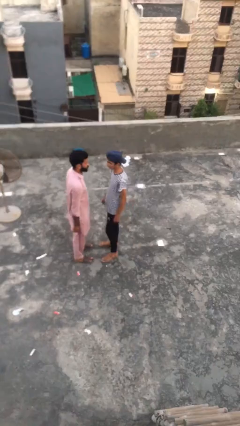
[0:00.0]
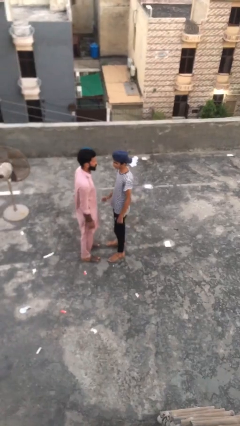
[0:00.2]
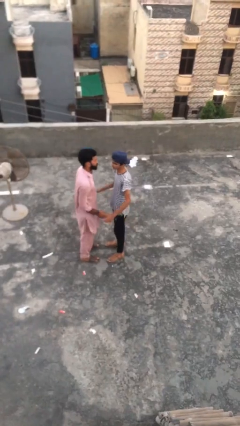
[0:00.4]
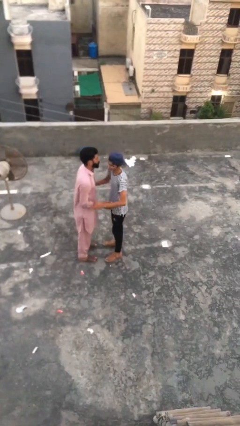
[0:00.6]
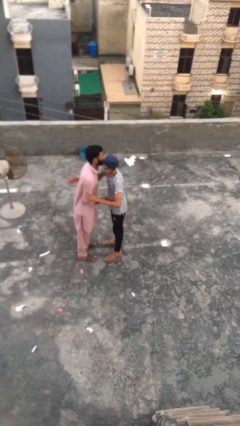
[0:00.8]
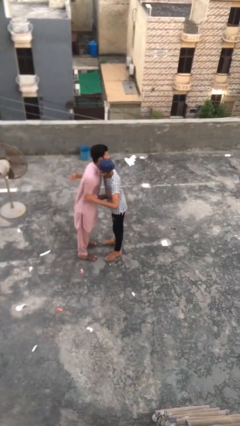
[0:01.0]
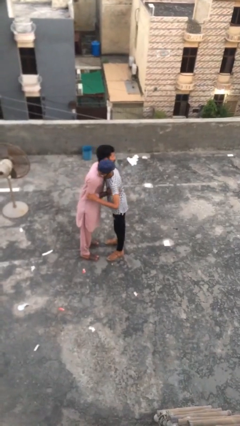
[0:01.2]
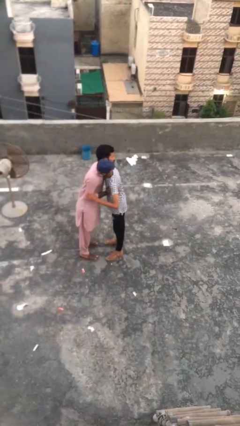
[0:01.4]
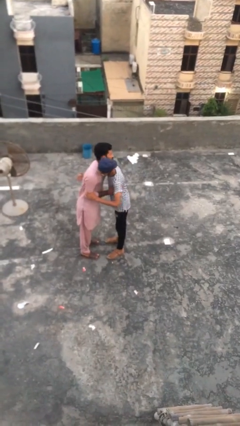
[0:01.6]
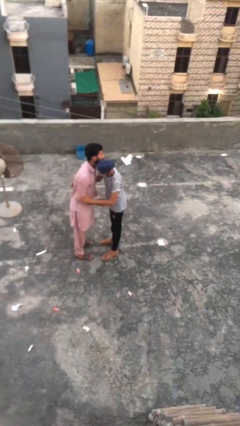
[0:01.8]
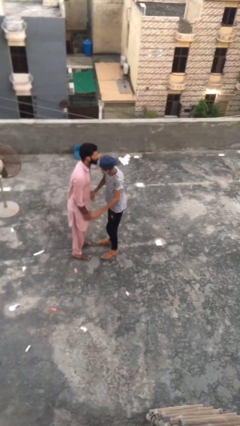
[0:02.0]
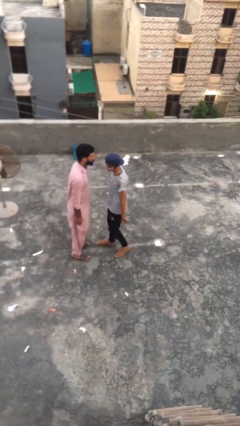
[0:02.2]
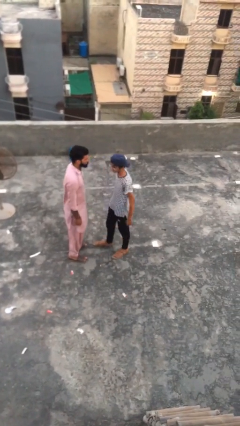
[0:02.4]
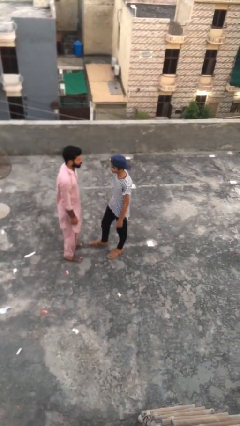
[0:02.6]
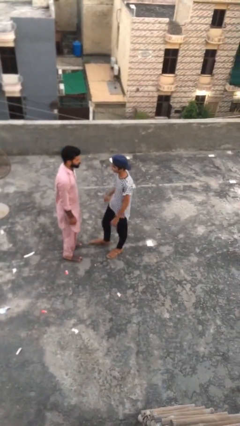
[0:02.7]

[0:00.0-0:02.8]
person embraces person

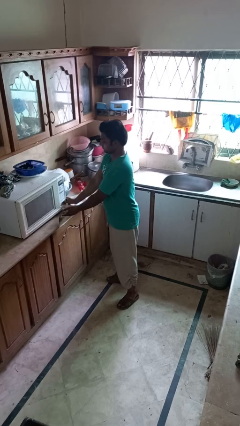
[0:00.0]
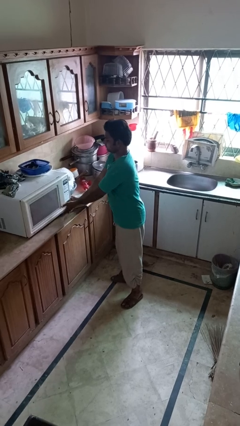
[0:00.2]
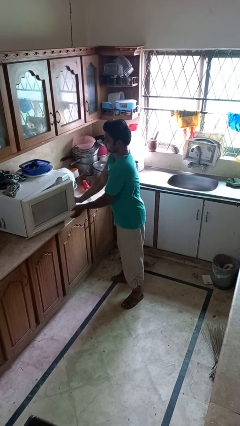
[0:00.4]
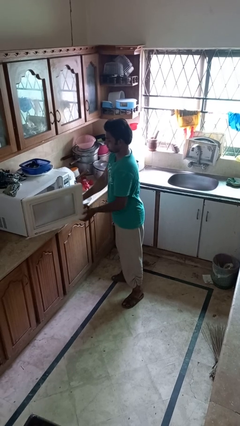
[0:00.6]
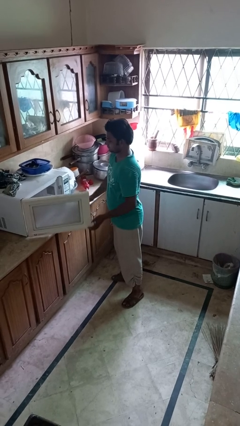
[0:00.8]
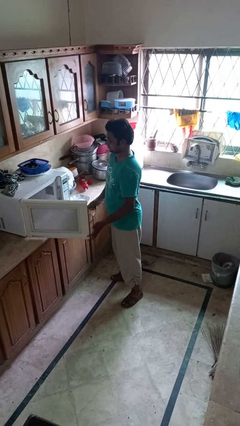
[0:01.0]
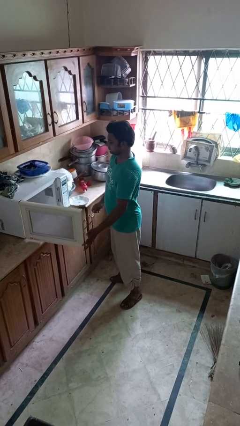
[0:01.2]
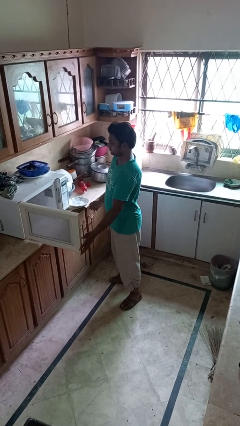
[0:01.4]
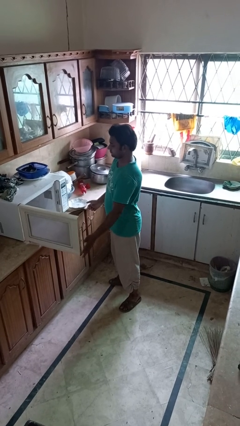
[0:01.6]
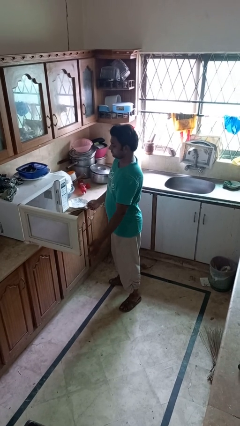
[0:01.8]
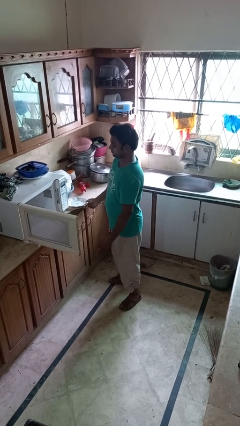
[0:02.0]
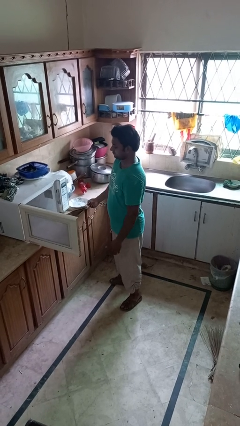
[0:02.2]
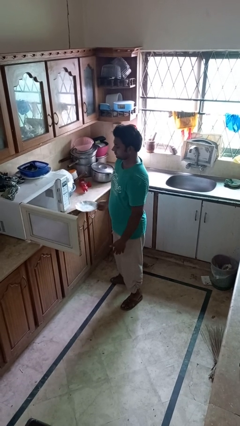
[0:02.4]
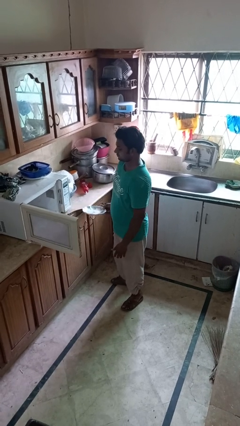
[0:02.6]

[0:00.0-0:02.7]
person opens microwave

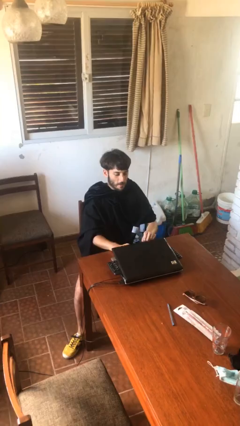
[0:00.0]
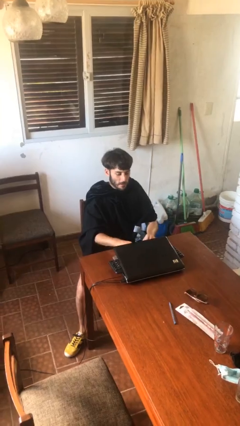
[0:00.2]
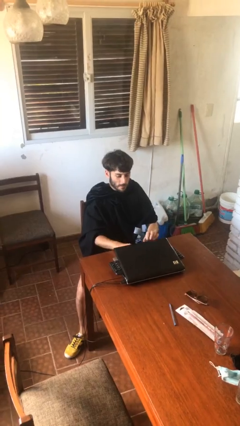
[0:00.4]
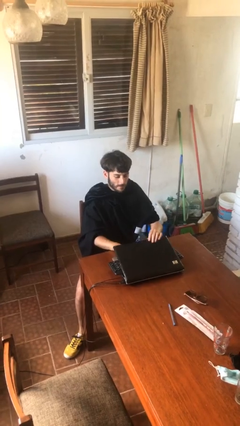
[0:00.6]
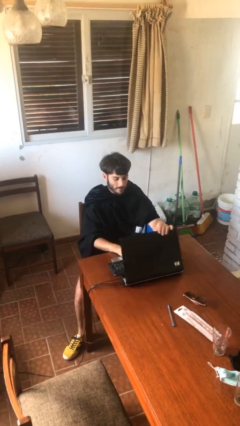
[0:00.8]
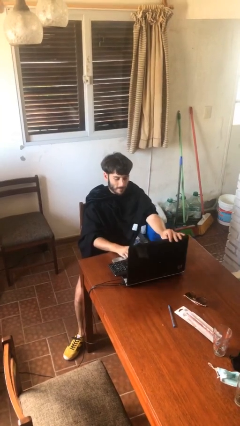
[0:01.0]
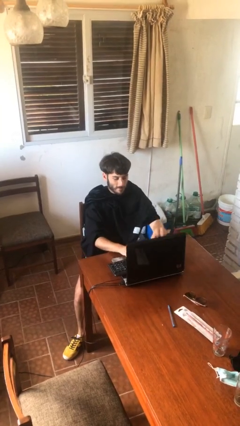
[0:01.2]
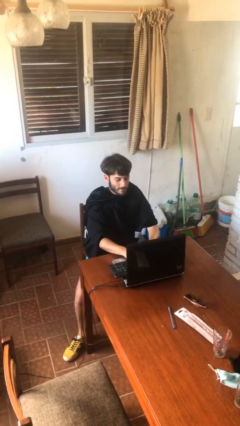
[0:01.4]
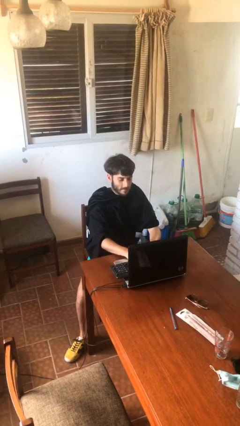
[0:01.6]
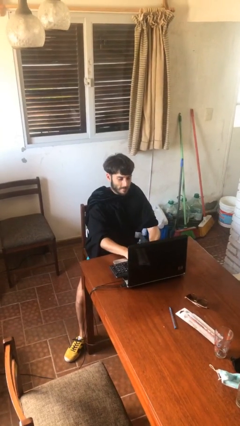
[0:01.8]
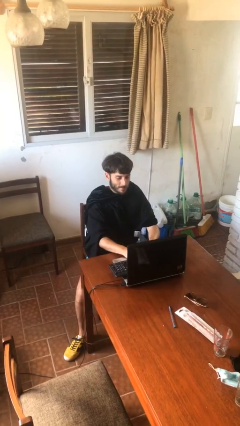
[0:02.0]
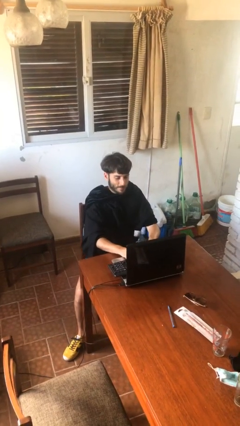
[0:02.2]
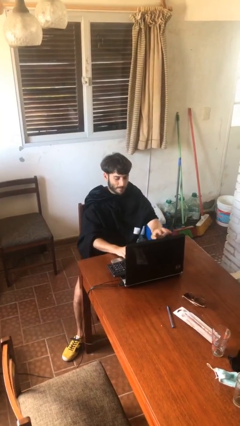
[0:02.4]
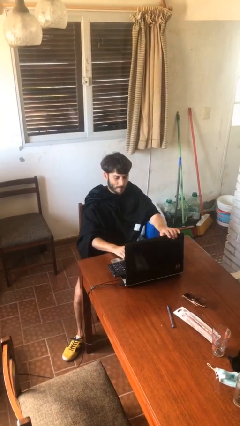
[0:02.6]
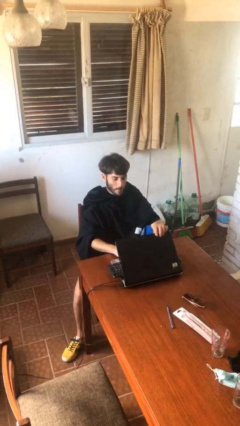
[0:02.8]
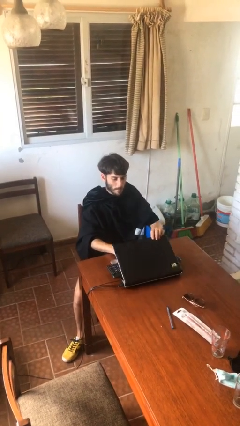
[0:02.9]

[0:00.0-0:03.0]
person interacts with laptop

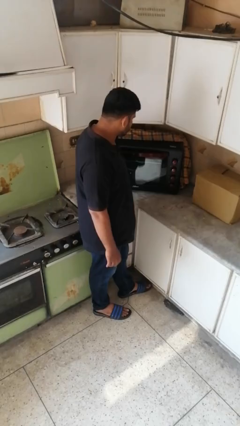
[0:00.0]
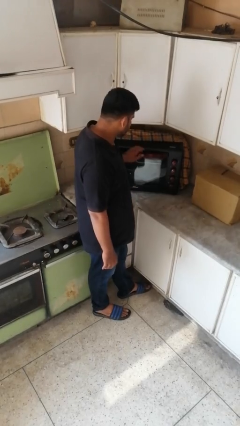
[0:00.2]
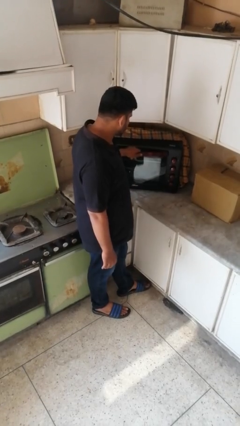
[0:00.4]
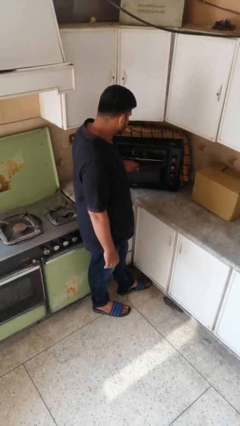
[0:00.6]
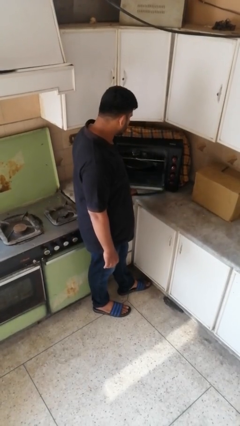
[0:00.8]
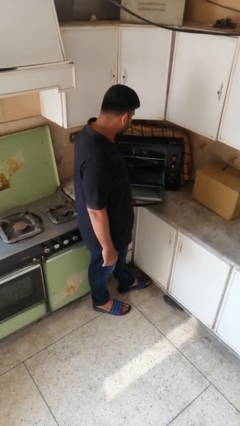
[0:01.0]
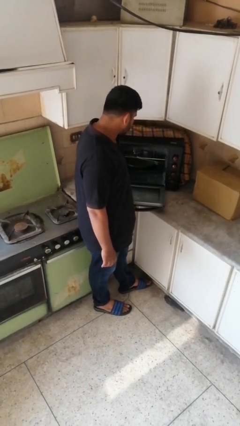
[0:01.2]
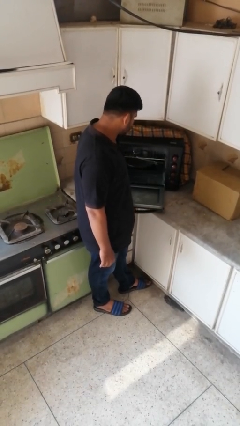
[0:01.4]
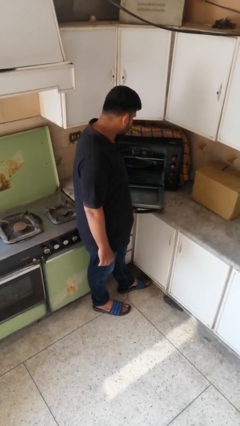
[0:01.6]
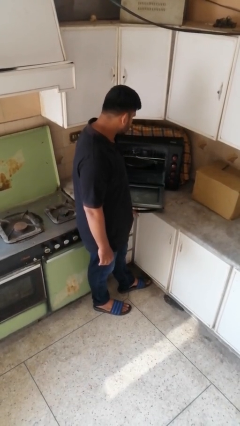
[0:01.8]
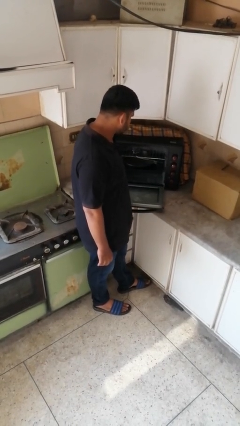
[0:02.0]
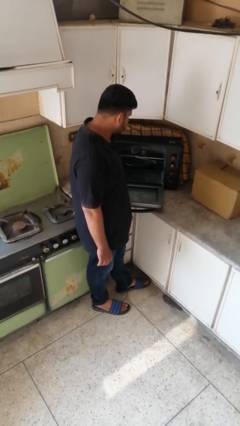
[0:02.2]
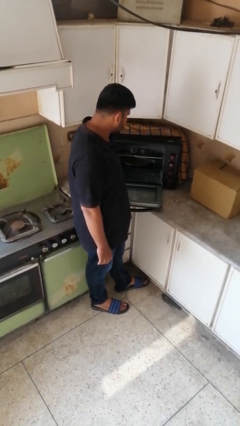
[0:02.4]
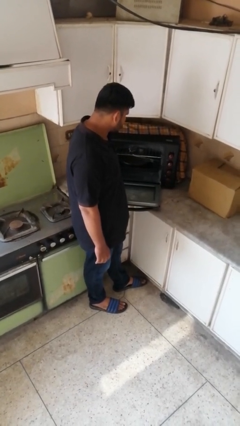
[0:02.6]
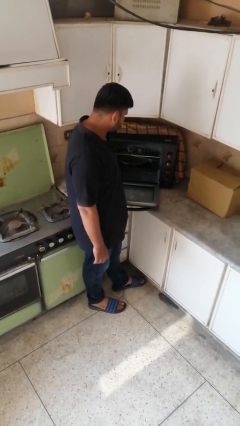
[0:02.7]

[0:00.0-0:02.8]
person opens oven door

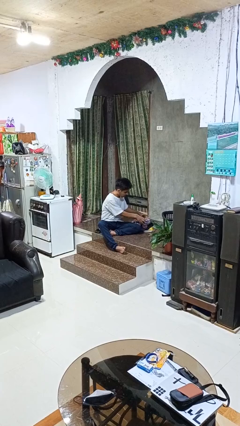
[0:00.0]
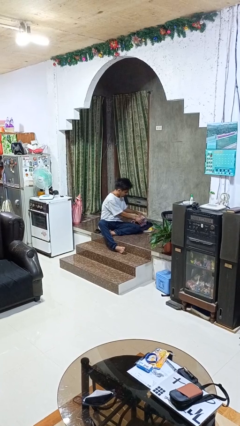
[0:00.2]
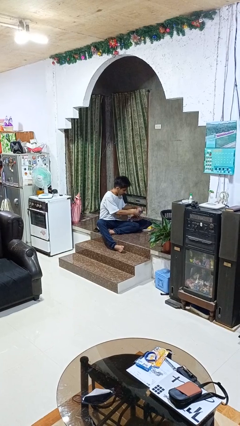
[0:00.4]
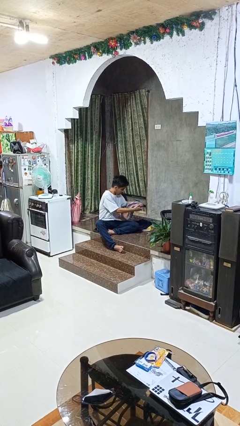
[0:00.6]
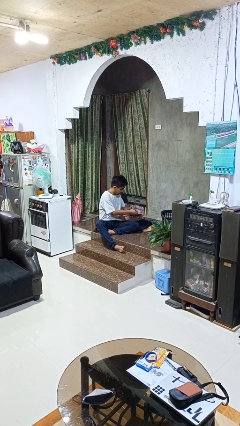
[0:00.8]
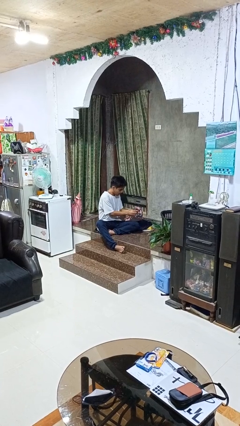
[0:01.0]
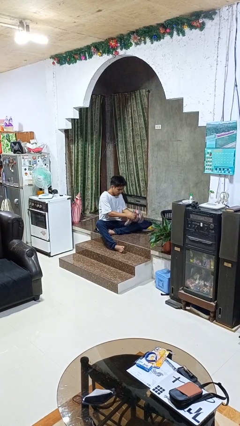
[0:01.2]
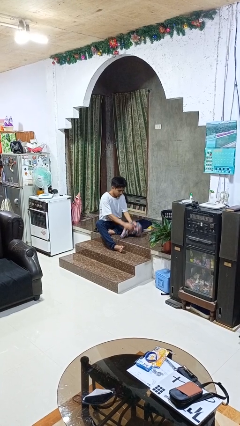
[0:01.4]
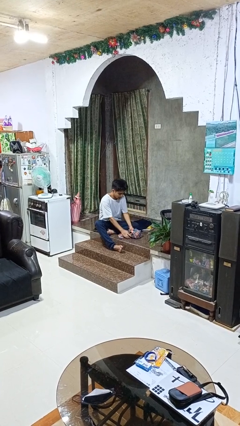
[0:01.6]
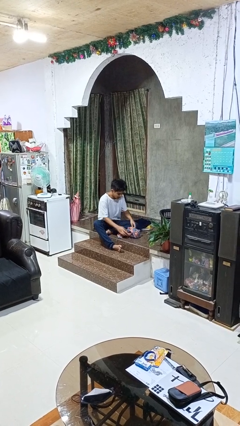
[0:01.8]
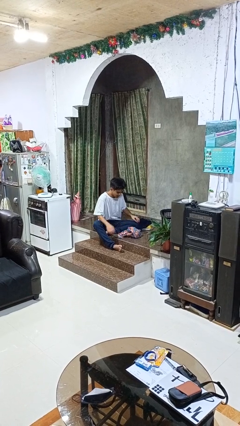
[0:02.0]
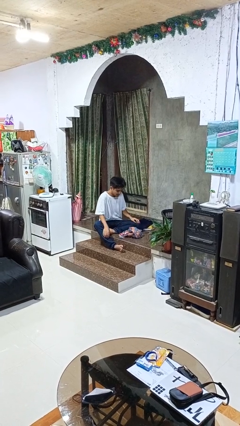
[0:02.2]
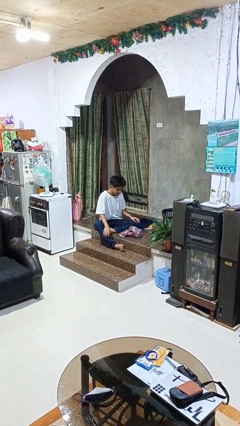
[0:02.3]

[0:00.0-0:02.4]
person folds shirt

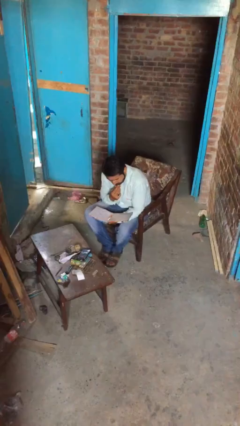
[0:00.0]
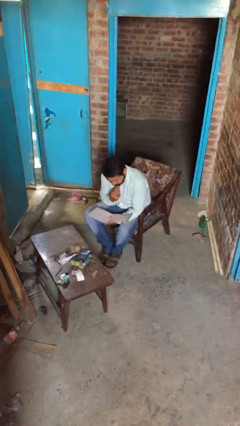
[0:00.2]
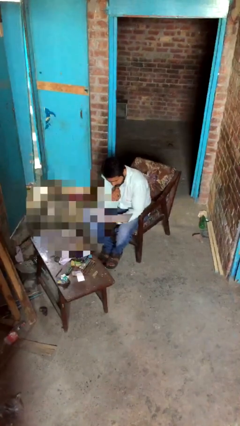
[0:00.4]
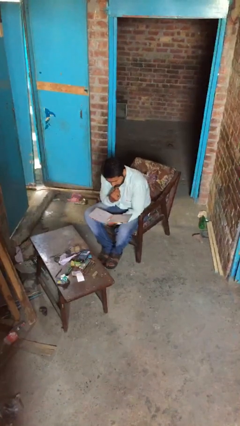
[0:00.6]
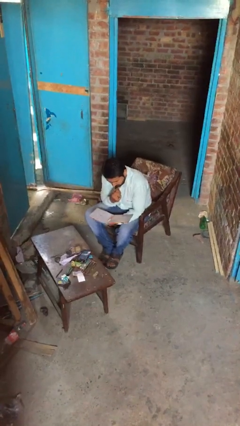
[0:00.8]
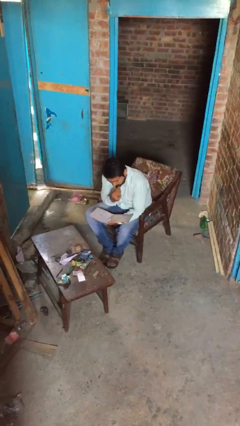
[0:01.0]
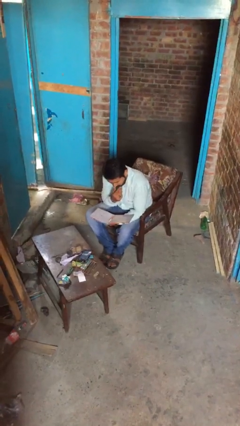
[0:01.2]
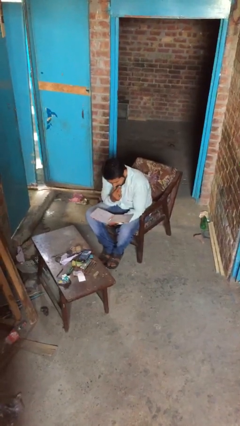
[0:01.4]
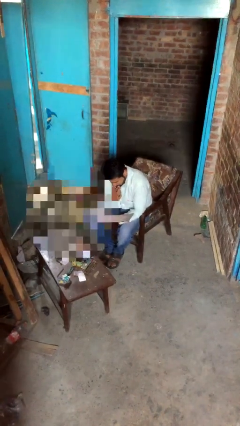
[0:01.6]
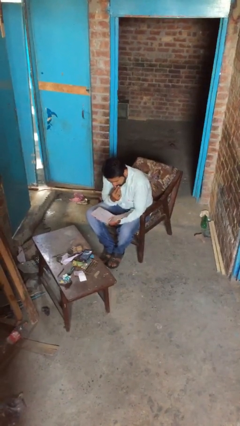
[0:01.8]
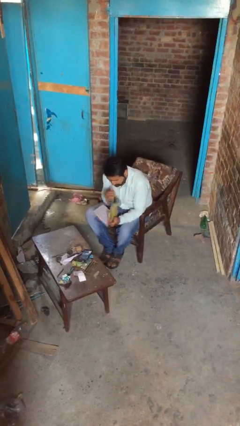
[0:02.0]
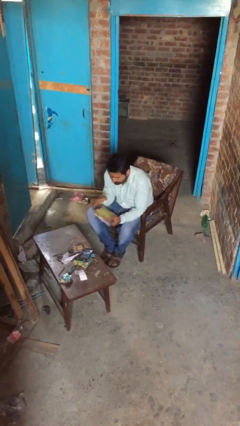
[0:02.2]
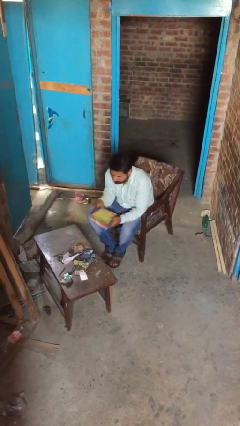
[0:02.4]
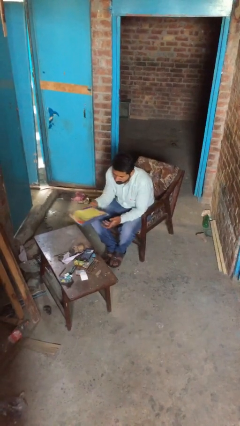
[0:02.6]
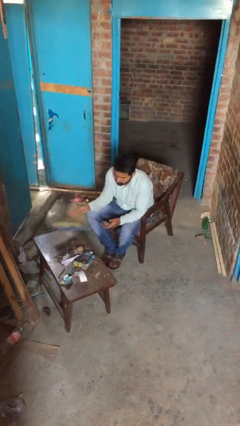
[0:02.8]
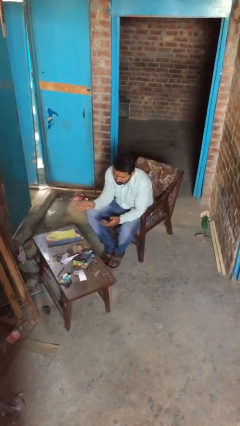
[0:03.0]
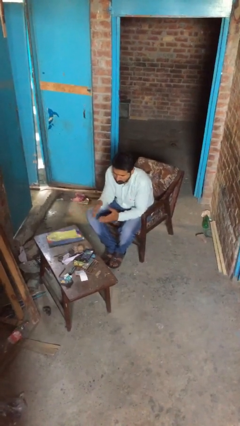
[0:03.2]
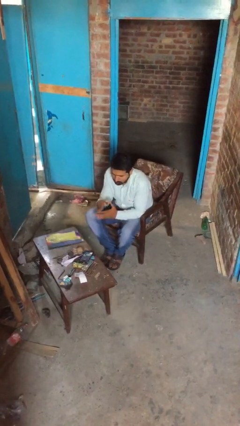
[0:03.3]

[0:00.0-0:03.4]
person puts down object on table

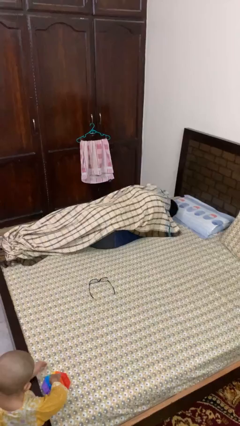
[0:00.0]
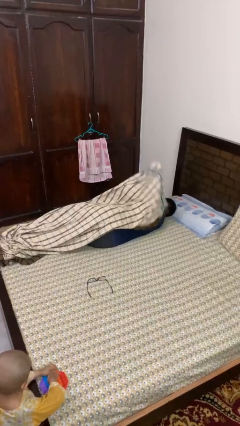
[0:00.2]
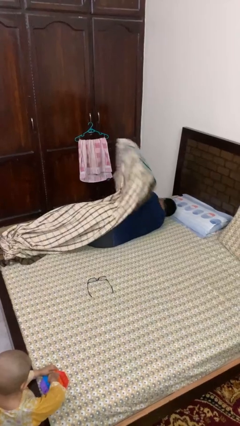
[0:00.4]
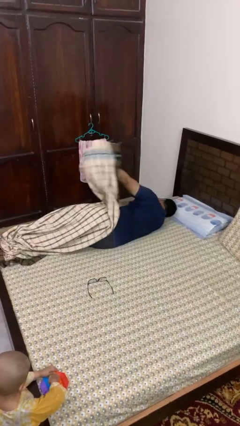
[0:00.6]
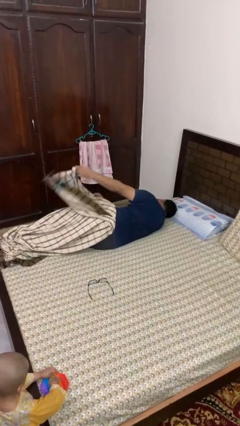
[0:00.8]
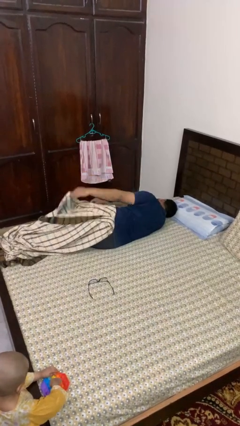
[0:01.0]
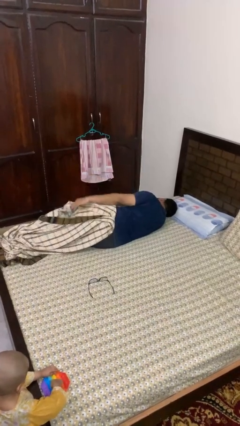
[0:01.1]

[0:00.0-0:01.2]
person uncovers with blanket
